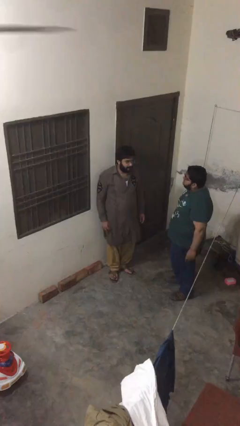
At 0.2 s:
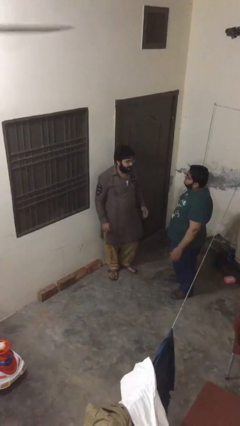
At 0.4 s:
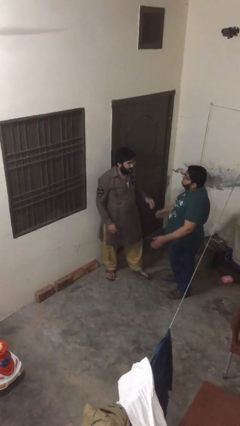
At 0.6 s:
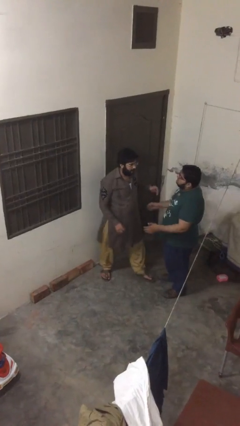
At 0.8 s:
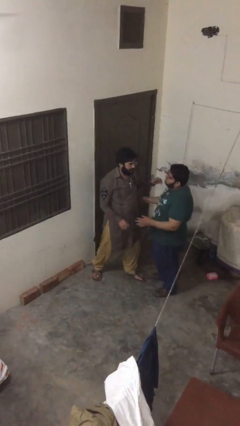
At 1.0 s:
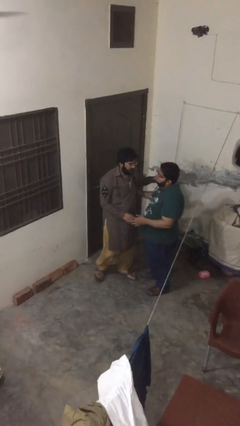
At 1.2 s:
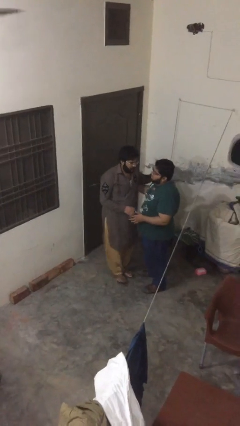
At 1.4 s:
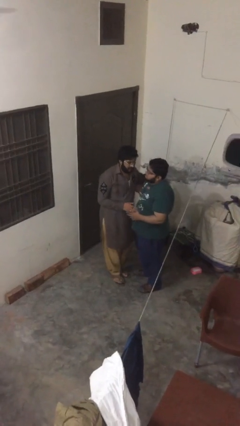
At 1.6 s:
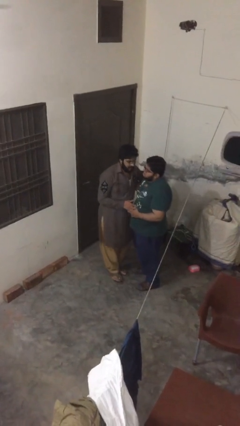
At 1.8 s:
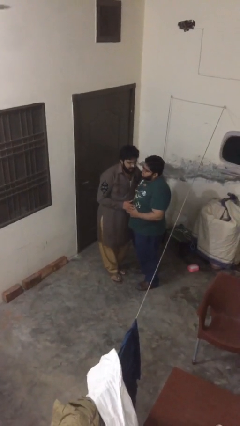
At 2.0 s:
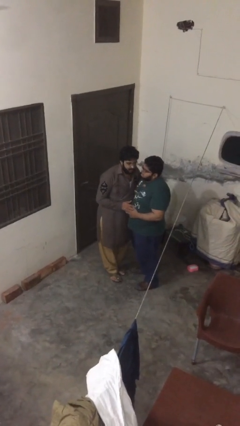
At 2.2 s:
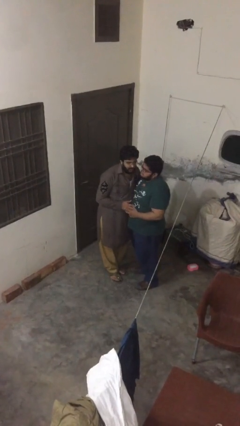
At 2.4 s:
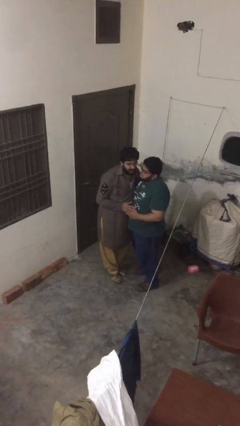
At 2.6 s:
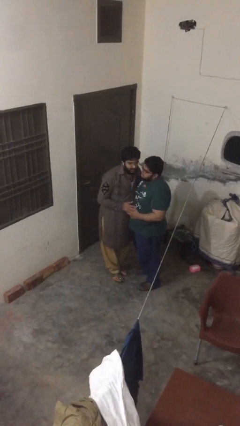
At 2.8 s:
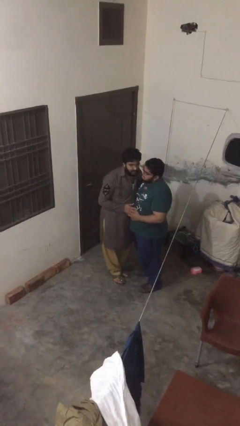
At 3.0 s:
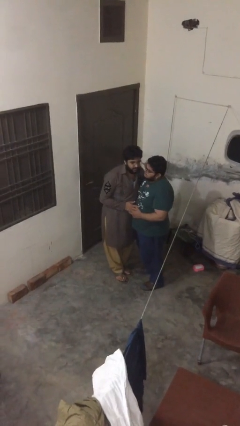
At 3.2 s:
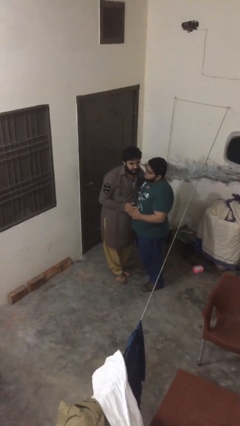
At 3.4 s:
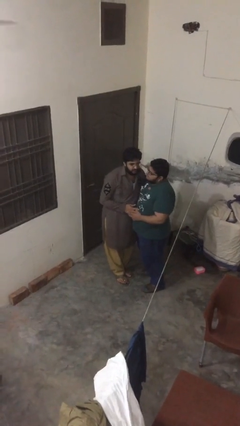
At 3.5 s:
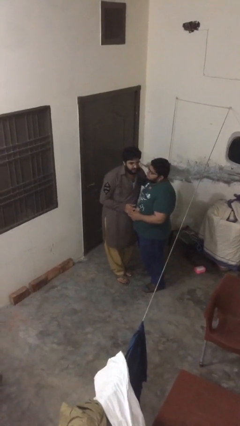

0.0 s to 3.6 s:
person embraces person

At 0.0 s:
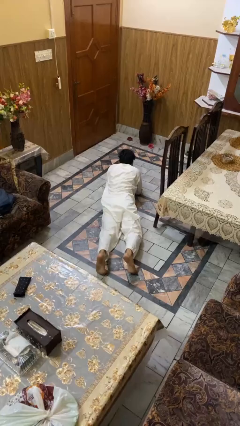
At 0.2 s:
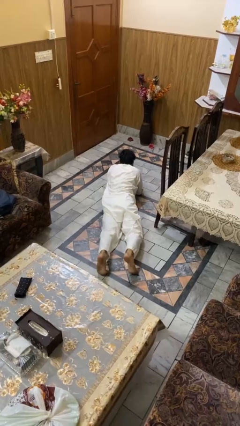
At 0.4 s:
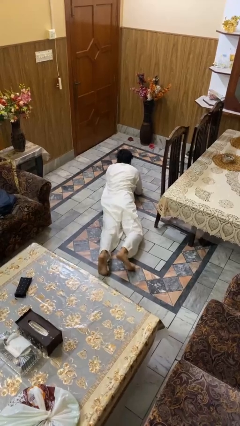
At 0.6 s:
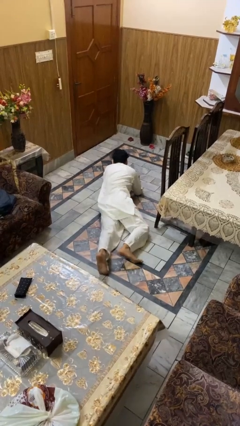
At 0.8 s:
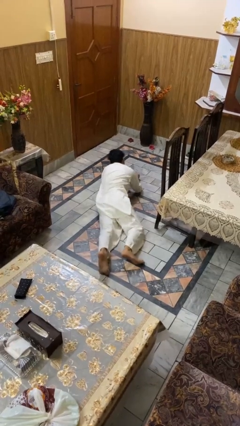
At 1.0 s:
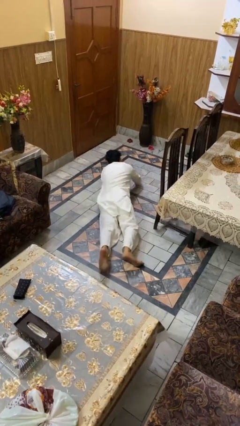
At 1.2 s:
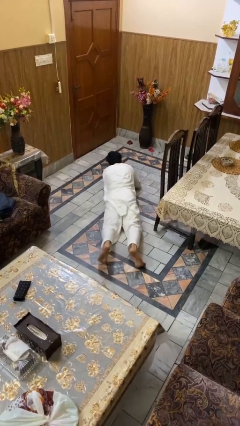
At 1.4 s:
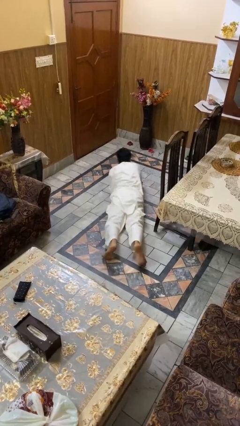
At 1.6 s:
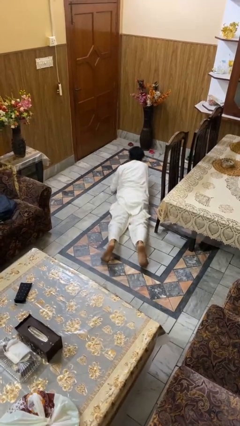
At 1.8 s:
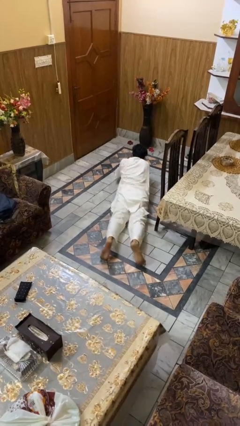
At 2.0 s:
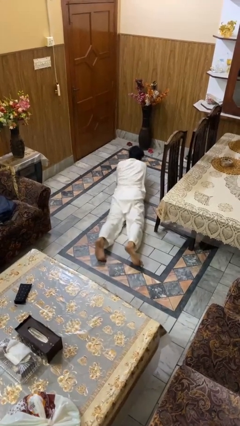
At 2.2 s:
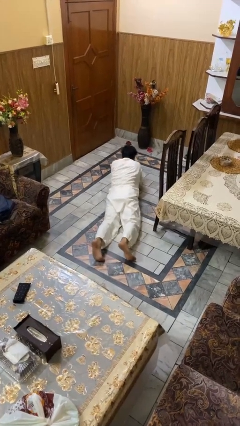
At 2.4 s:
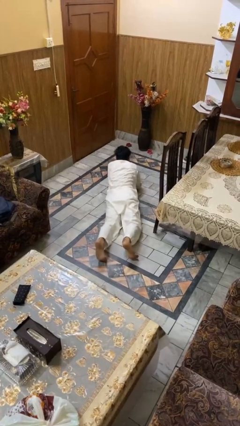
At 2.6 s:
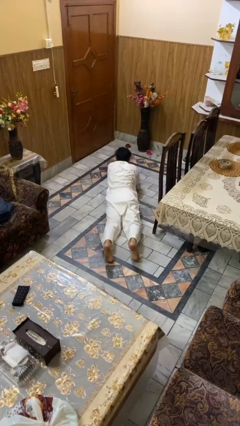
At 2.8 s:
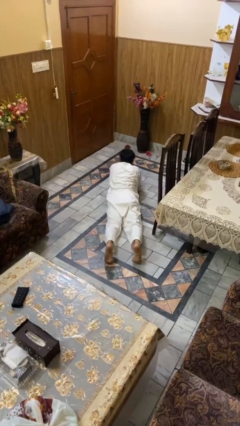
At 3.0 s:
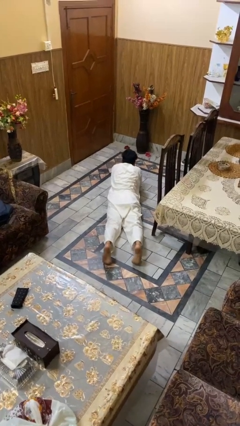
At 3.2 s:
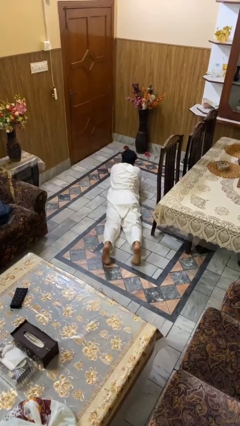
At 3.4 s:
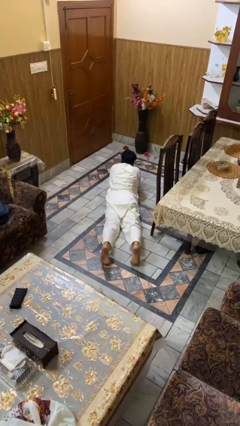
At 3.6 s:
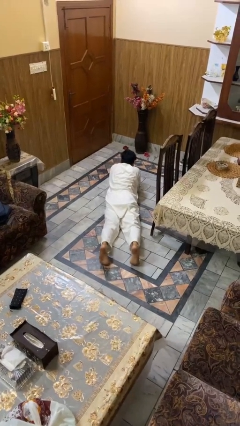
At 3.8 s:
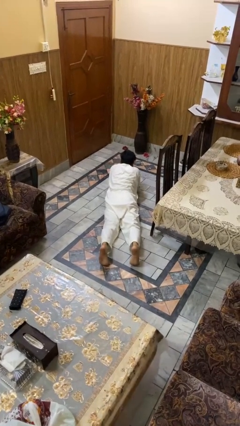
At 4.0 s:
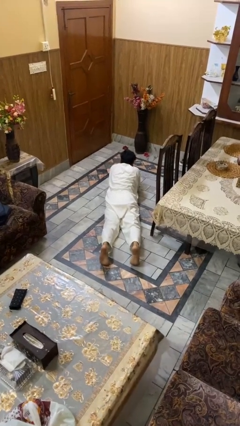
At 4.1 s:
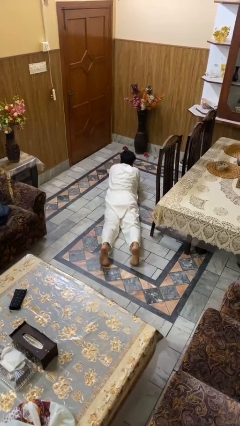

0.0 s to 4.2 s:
person crawls

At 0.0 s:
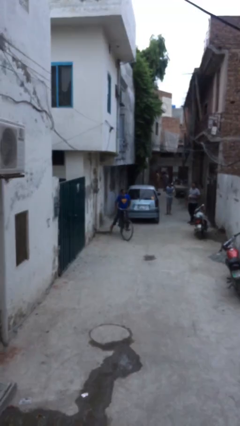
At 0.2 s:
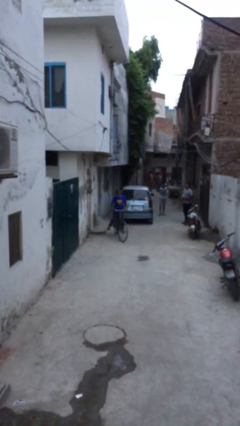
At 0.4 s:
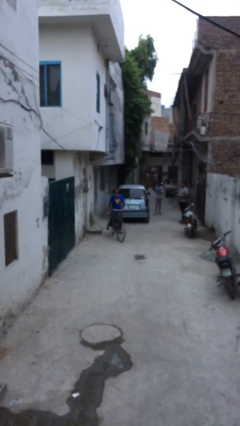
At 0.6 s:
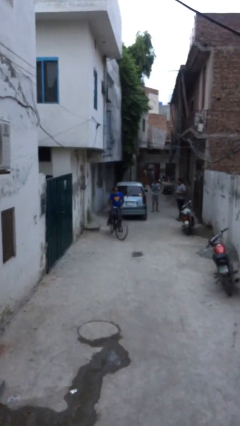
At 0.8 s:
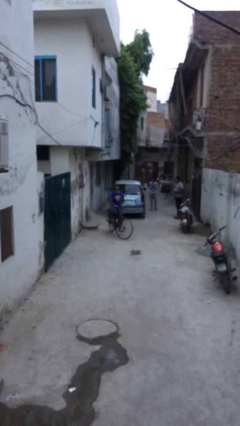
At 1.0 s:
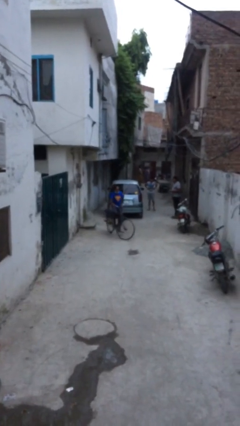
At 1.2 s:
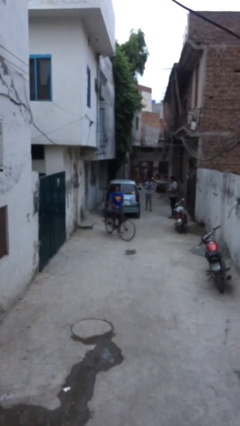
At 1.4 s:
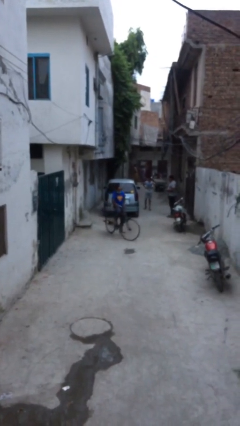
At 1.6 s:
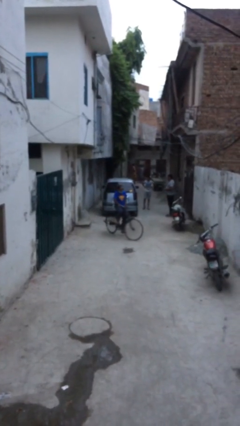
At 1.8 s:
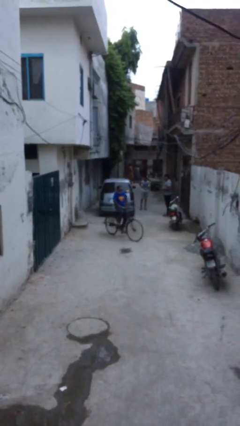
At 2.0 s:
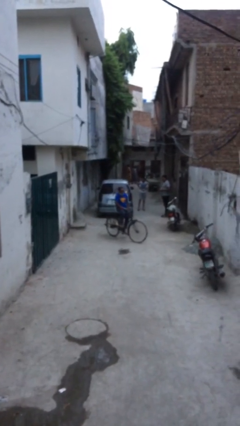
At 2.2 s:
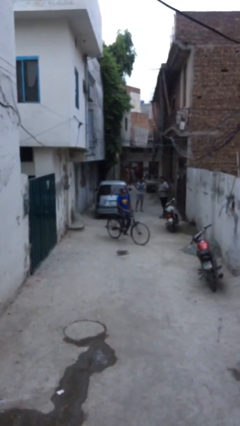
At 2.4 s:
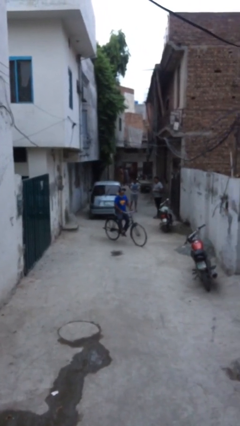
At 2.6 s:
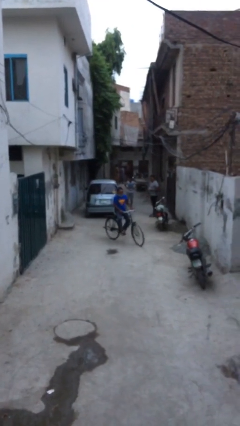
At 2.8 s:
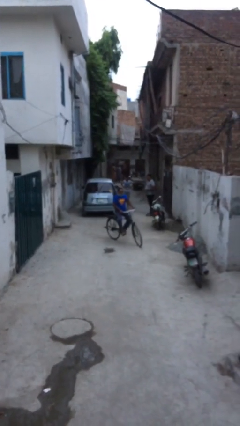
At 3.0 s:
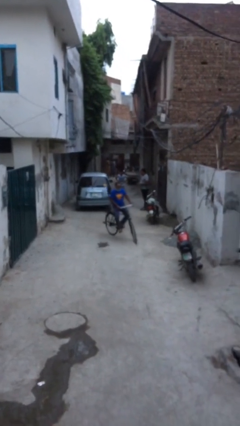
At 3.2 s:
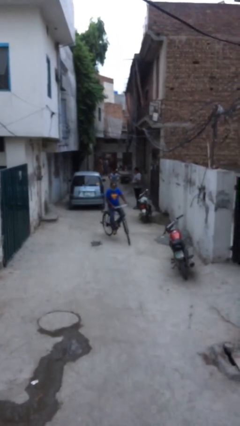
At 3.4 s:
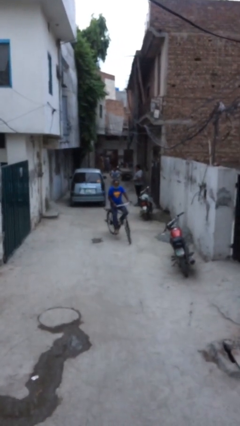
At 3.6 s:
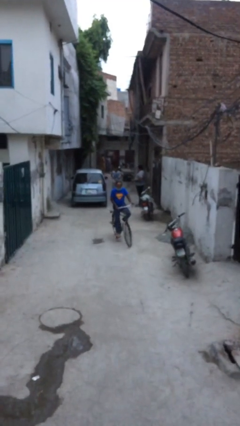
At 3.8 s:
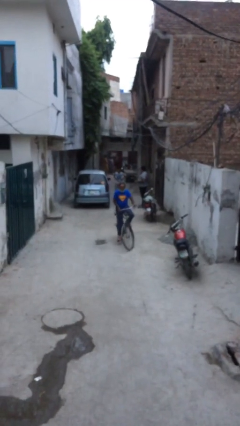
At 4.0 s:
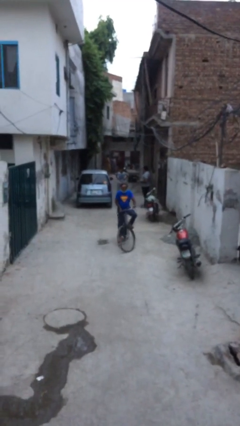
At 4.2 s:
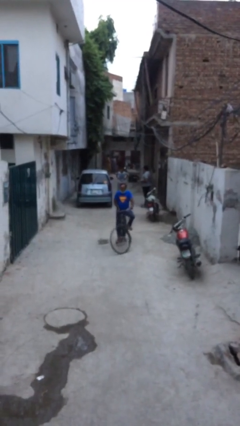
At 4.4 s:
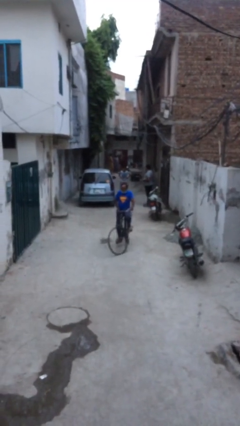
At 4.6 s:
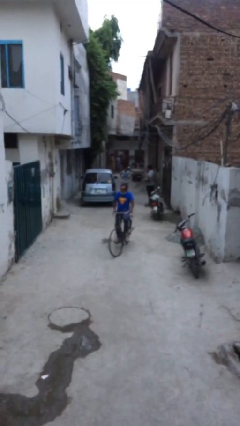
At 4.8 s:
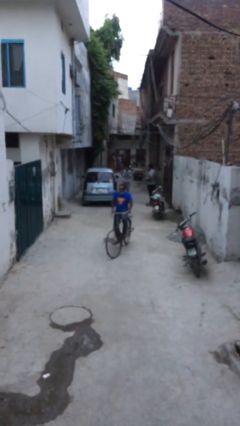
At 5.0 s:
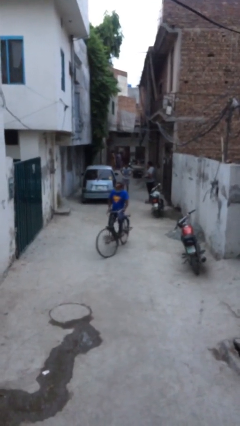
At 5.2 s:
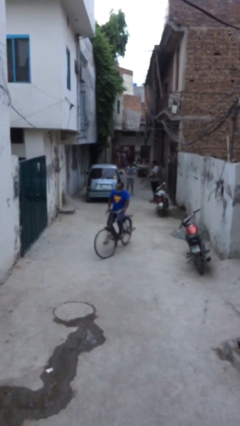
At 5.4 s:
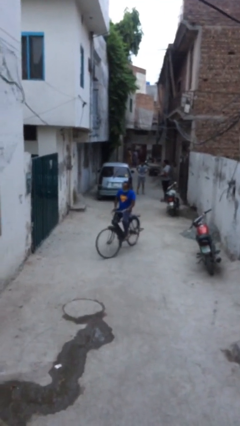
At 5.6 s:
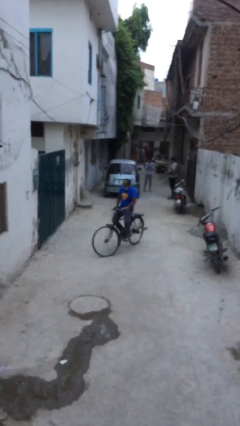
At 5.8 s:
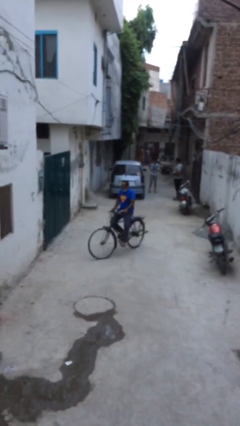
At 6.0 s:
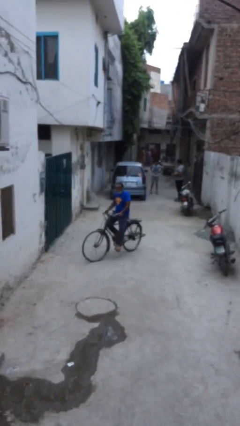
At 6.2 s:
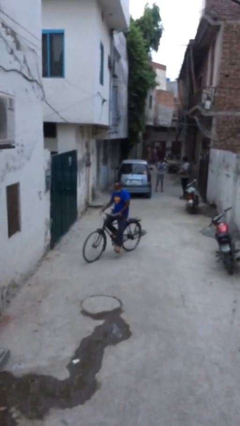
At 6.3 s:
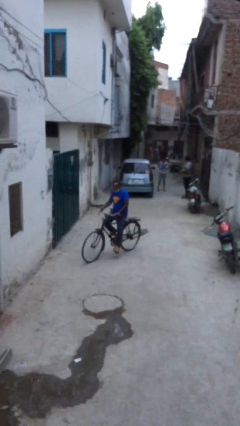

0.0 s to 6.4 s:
person rides bicycle

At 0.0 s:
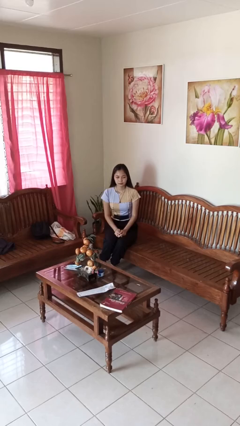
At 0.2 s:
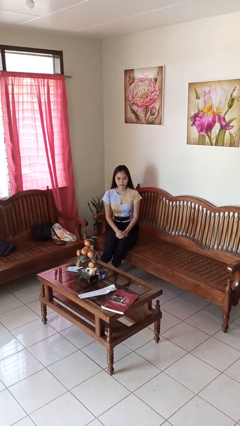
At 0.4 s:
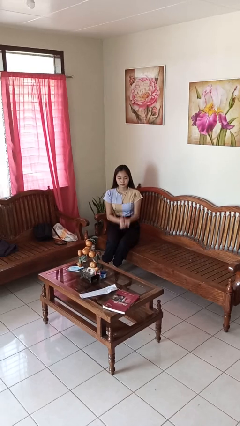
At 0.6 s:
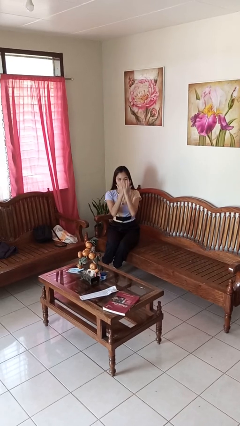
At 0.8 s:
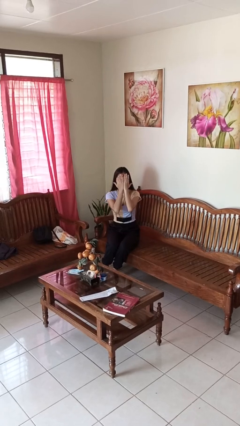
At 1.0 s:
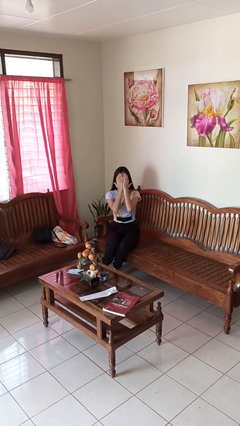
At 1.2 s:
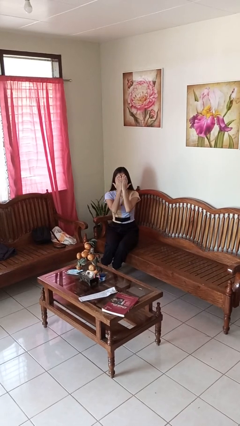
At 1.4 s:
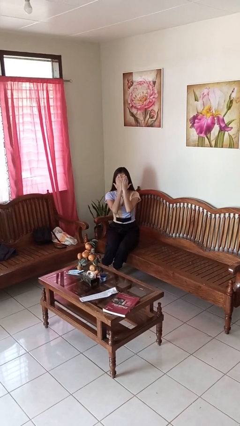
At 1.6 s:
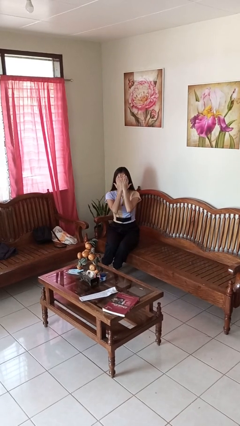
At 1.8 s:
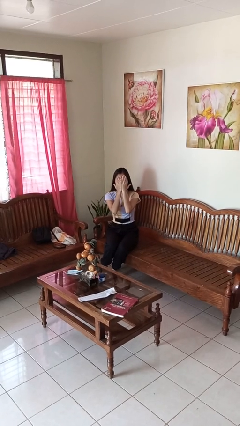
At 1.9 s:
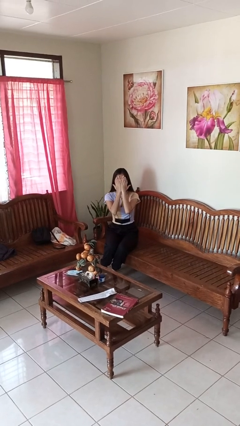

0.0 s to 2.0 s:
person covers face with hands

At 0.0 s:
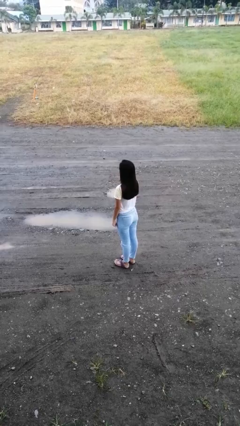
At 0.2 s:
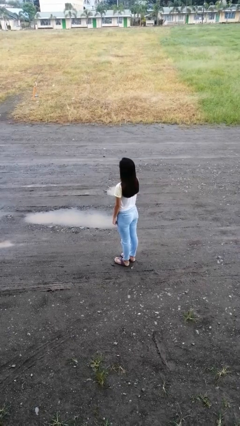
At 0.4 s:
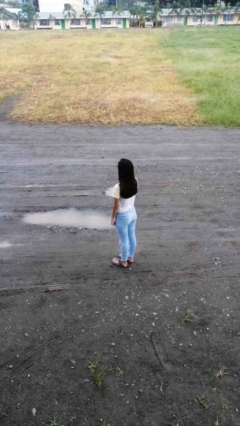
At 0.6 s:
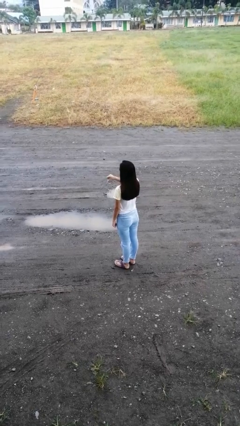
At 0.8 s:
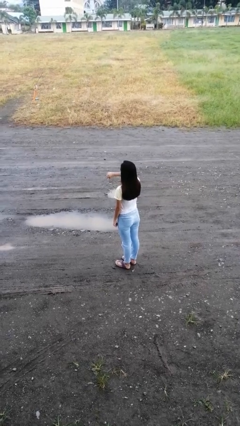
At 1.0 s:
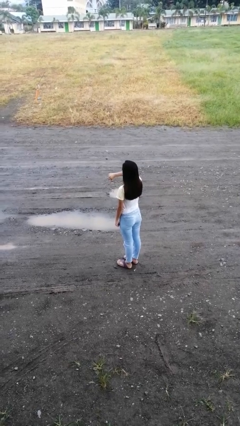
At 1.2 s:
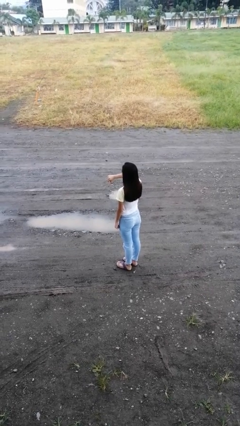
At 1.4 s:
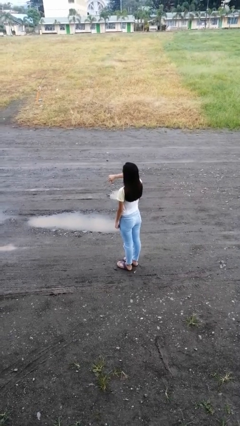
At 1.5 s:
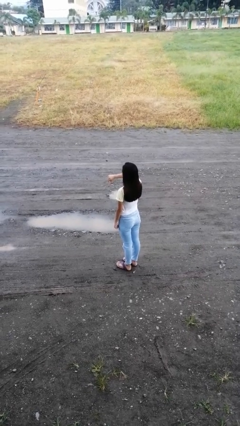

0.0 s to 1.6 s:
person gestures thumbs down
